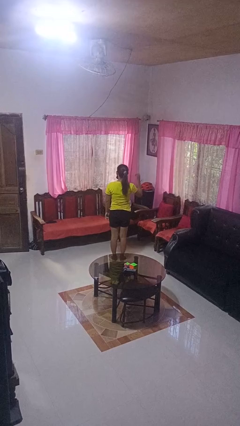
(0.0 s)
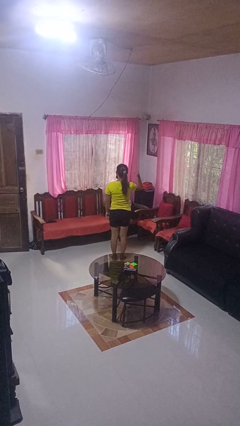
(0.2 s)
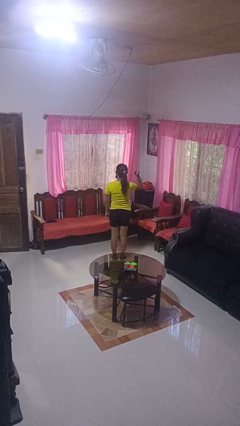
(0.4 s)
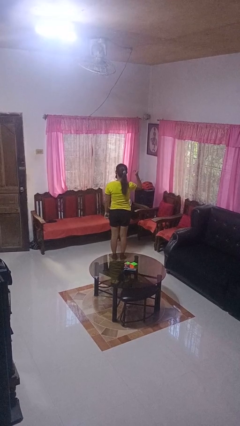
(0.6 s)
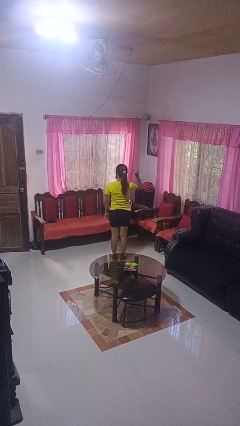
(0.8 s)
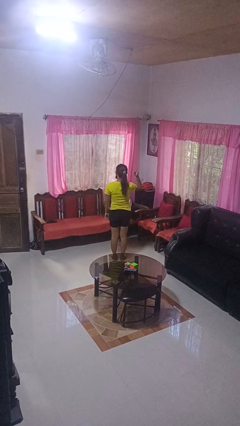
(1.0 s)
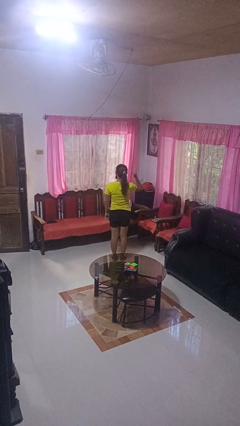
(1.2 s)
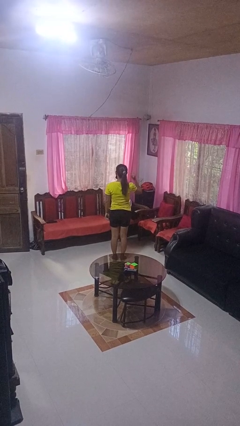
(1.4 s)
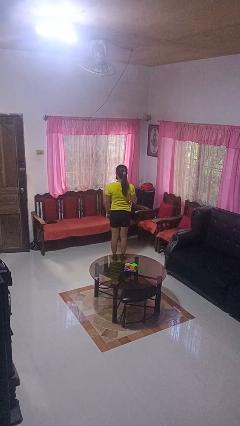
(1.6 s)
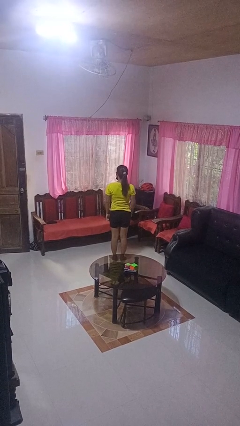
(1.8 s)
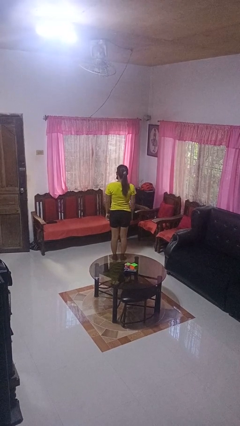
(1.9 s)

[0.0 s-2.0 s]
person gestures hang loose

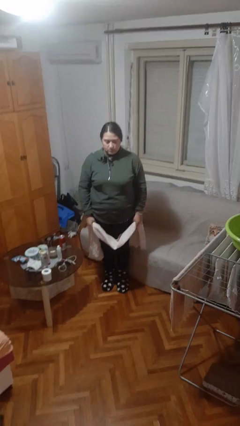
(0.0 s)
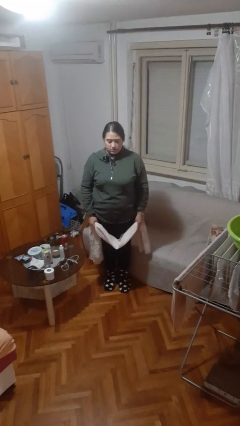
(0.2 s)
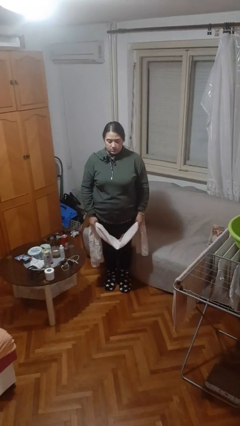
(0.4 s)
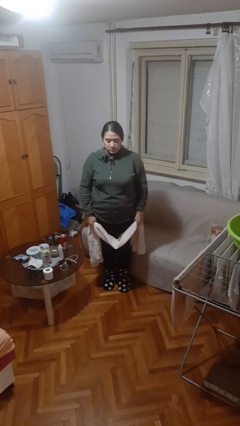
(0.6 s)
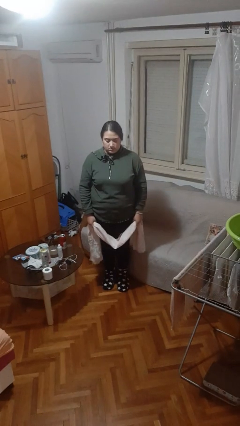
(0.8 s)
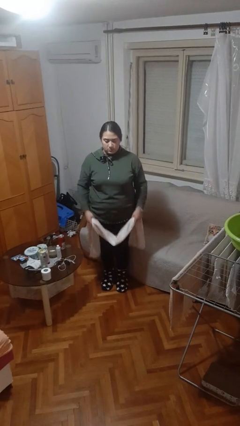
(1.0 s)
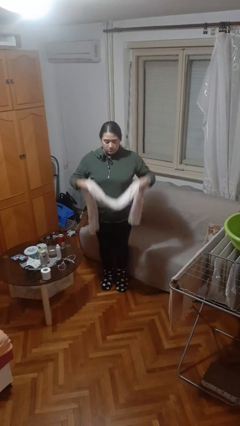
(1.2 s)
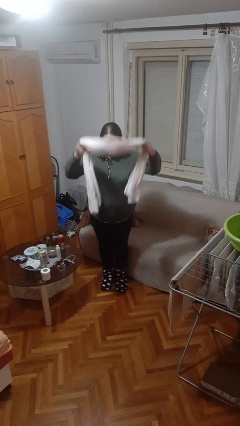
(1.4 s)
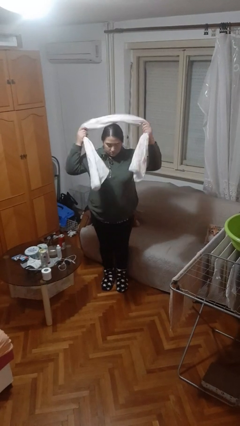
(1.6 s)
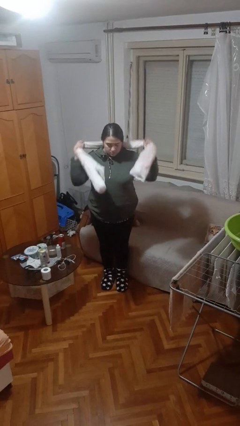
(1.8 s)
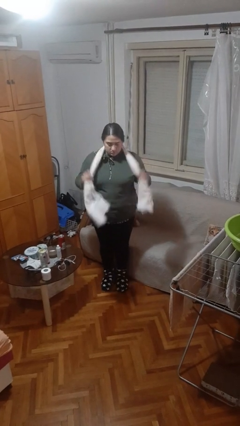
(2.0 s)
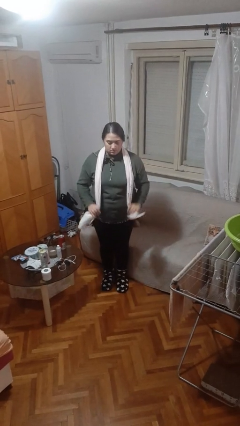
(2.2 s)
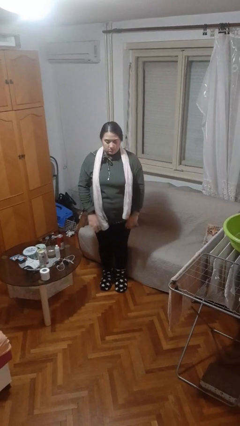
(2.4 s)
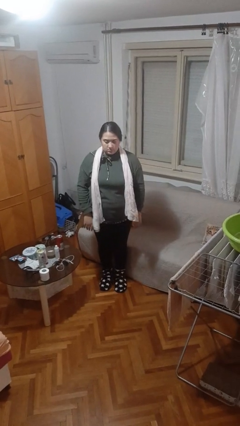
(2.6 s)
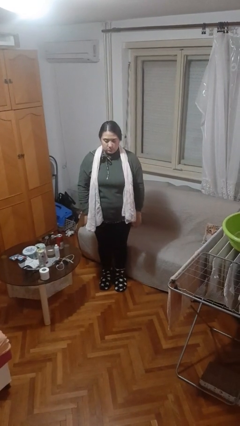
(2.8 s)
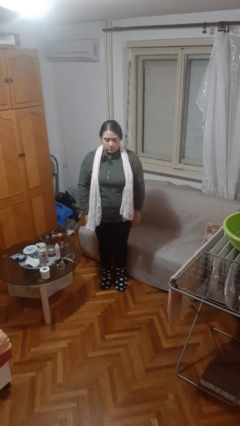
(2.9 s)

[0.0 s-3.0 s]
person puts on scarf

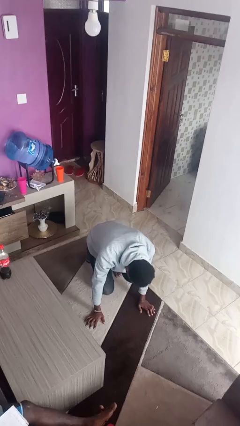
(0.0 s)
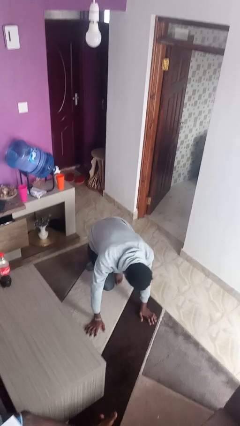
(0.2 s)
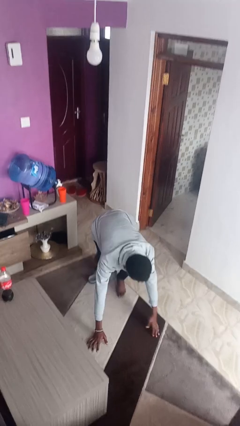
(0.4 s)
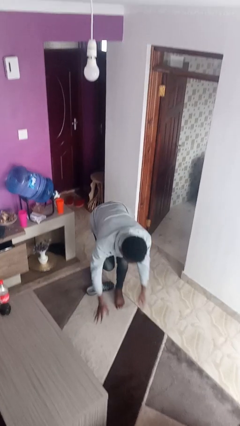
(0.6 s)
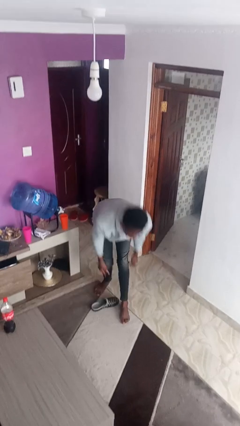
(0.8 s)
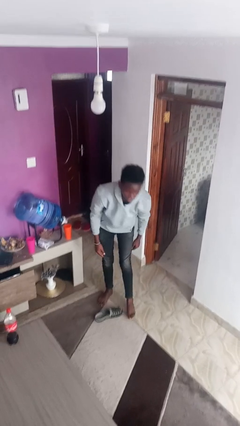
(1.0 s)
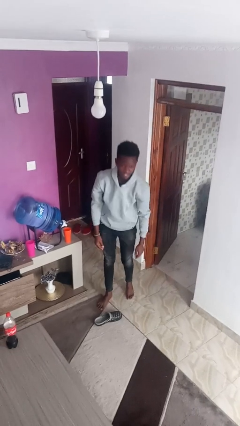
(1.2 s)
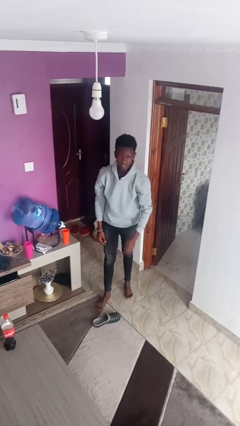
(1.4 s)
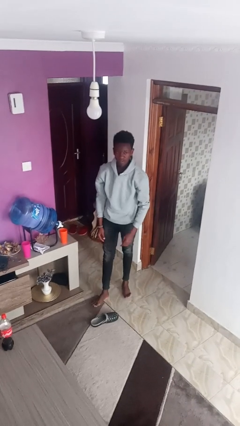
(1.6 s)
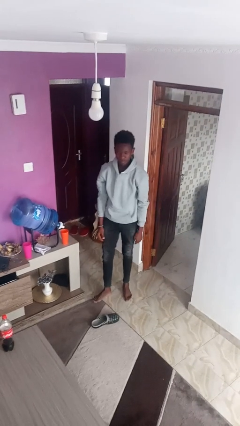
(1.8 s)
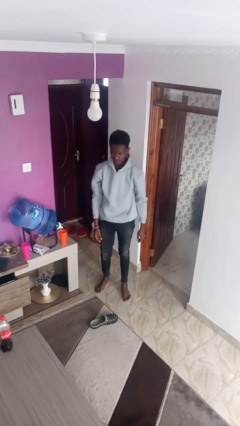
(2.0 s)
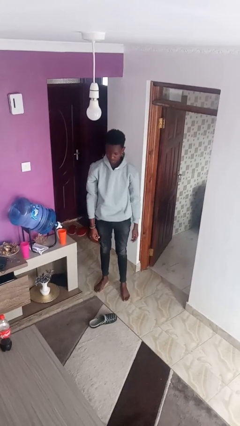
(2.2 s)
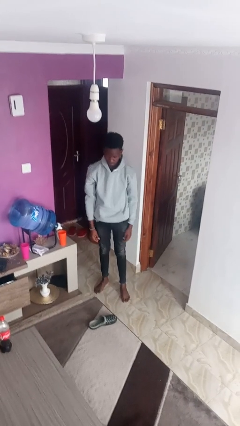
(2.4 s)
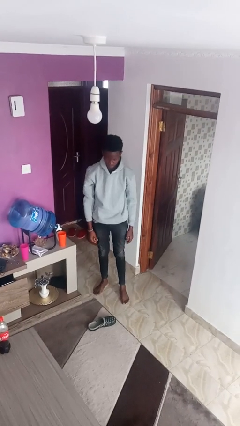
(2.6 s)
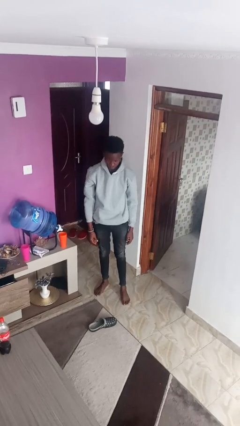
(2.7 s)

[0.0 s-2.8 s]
person stands up from floor

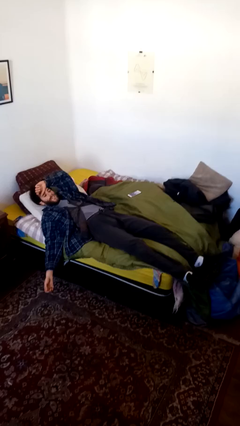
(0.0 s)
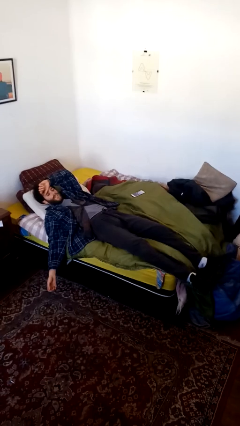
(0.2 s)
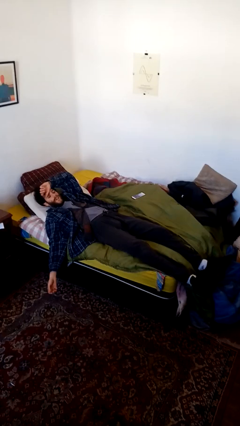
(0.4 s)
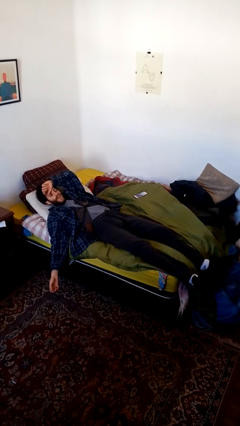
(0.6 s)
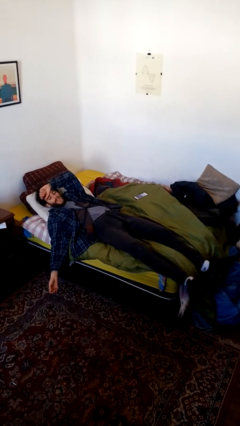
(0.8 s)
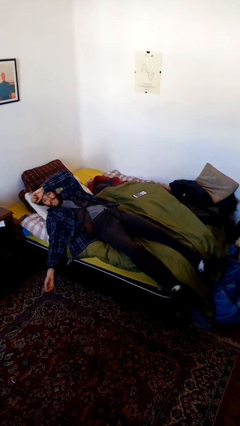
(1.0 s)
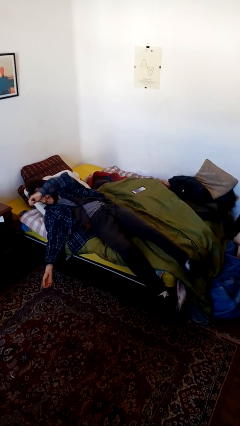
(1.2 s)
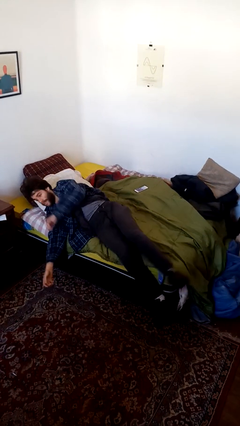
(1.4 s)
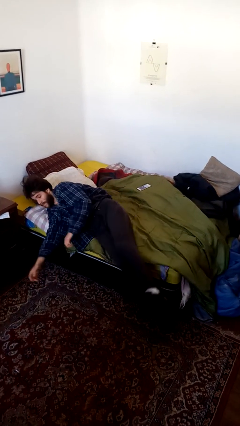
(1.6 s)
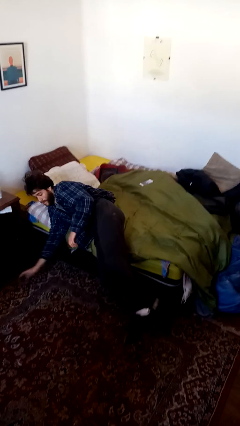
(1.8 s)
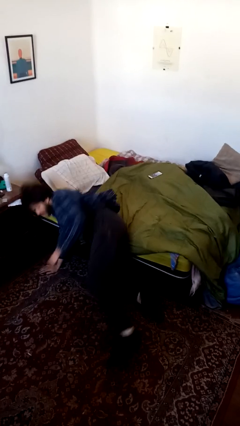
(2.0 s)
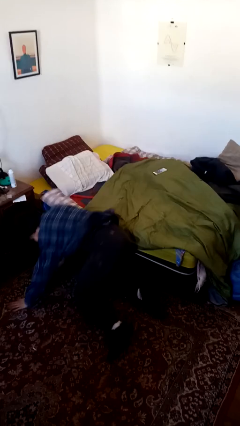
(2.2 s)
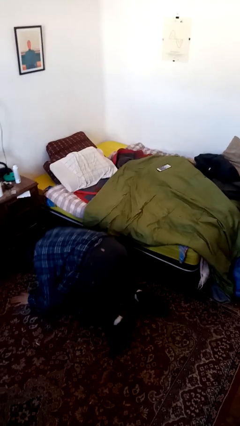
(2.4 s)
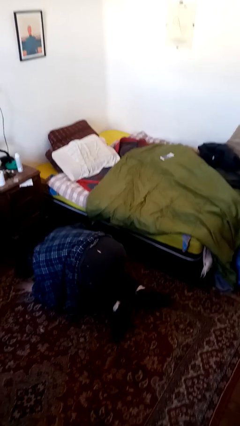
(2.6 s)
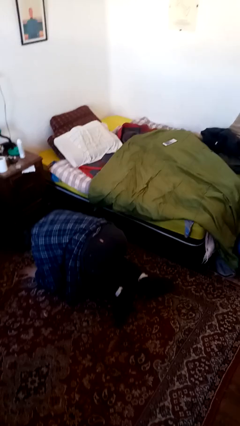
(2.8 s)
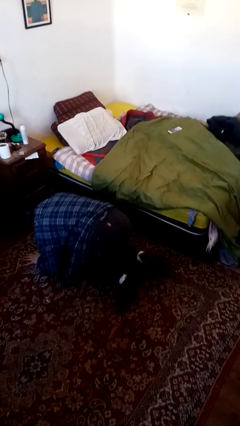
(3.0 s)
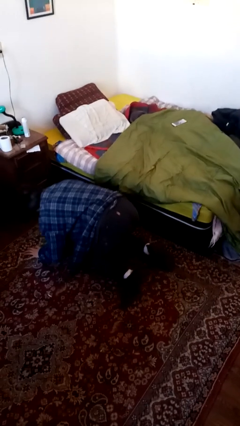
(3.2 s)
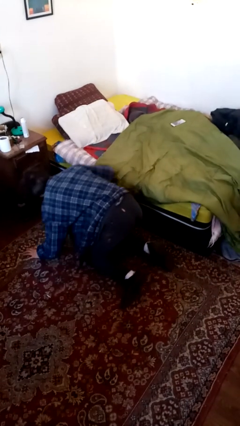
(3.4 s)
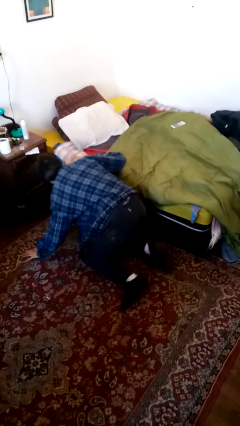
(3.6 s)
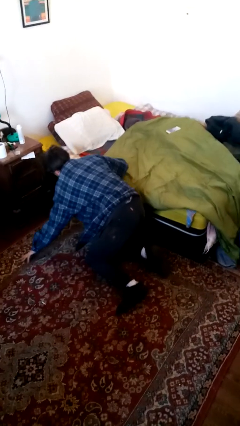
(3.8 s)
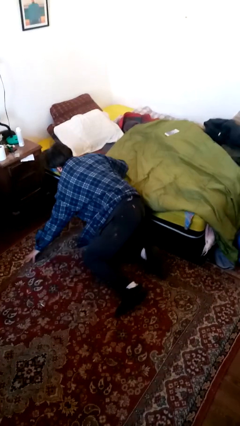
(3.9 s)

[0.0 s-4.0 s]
person falls from bed

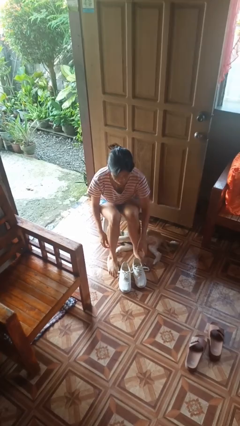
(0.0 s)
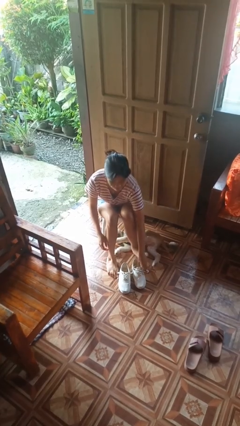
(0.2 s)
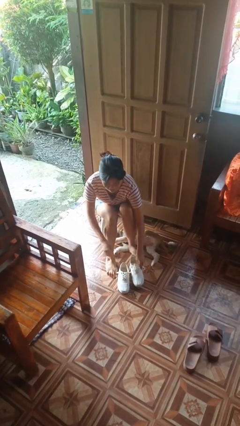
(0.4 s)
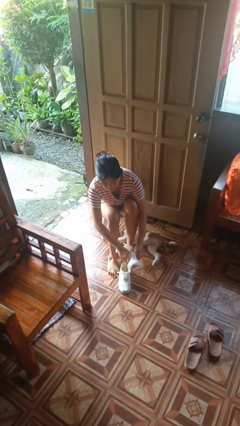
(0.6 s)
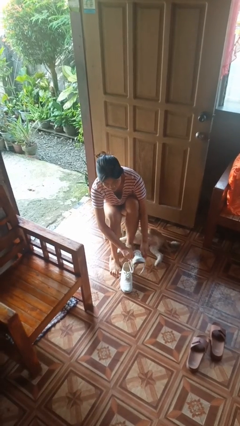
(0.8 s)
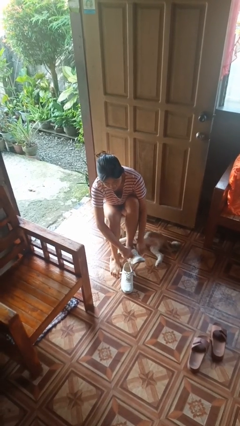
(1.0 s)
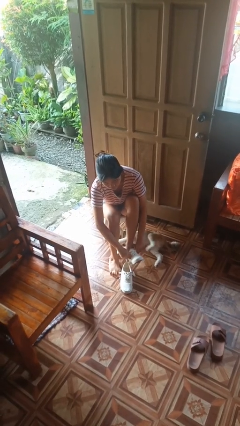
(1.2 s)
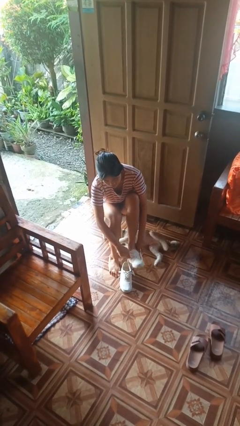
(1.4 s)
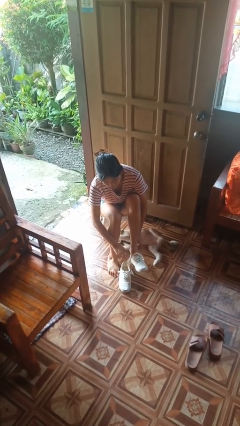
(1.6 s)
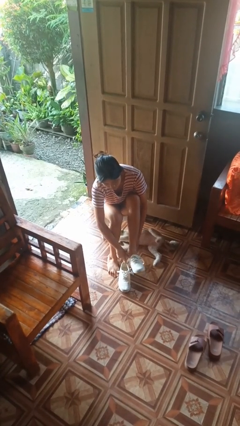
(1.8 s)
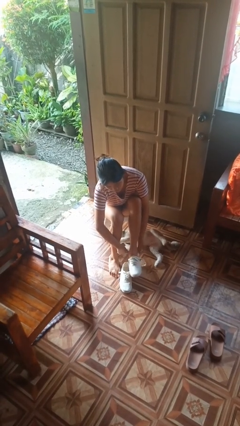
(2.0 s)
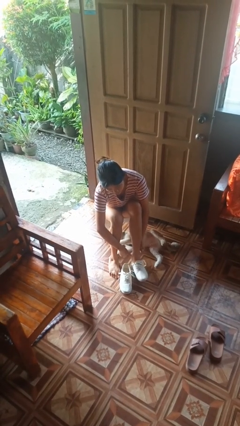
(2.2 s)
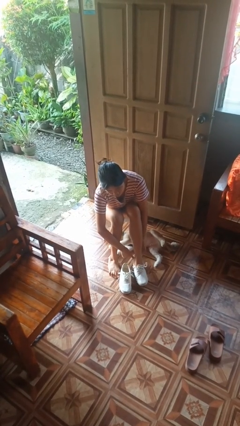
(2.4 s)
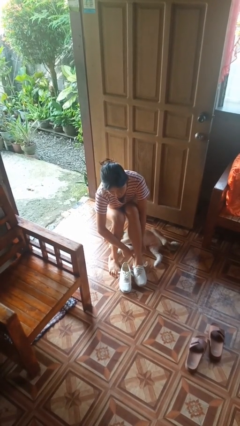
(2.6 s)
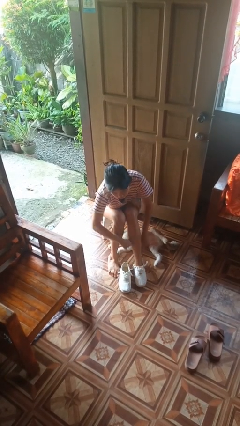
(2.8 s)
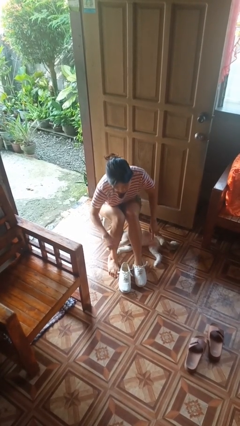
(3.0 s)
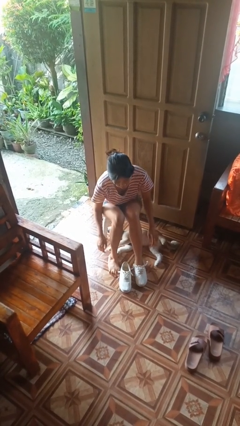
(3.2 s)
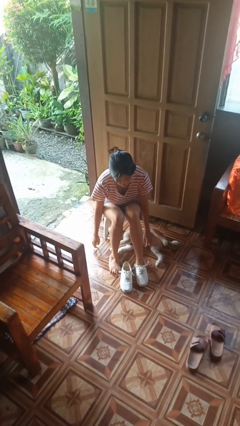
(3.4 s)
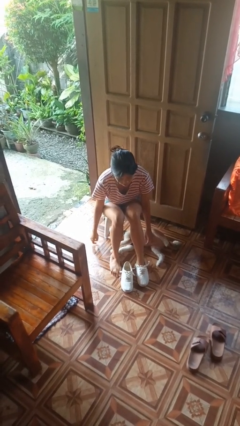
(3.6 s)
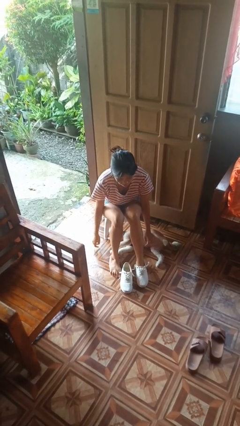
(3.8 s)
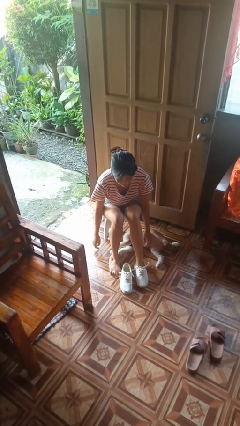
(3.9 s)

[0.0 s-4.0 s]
person puts on shoes

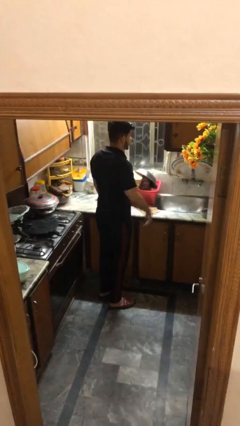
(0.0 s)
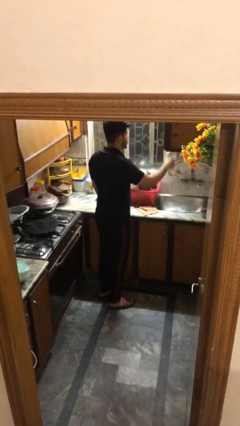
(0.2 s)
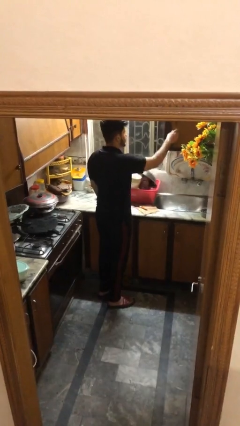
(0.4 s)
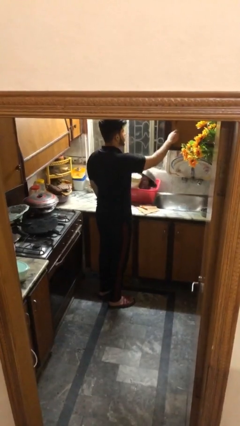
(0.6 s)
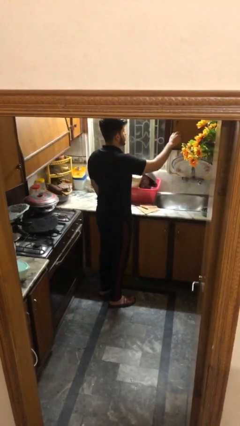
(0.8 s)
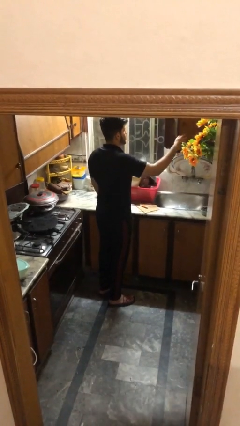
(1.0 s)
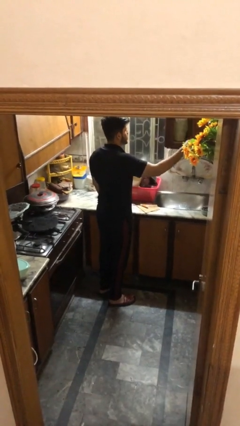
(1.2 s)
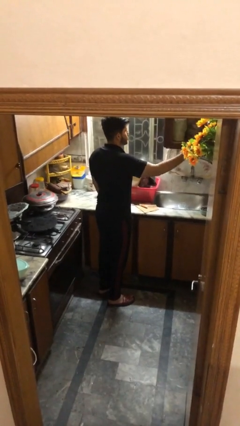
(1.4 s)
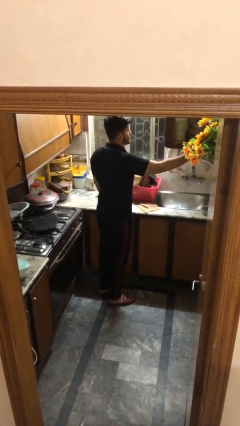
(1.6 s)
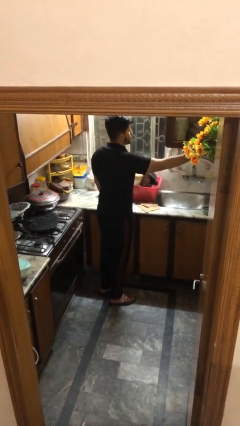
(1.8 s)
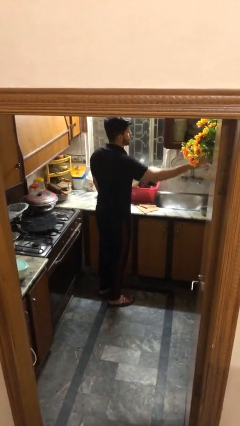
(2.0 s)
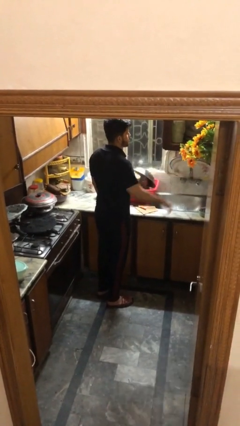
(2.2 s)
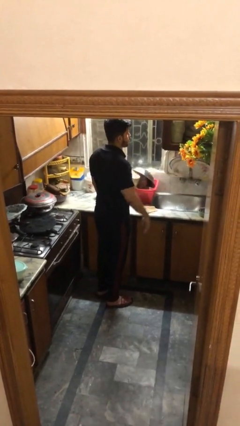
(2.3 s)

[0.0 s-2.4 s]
person opens kitchen drawer
